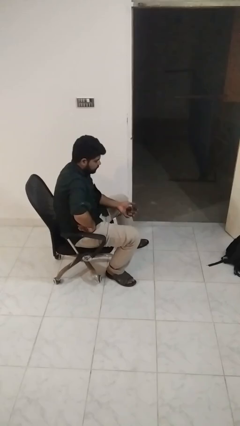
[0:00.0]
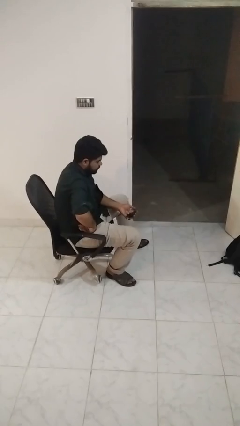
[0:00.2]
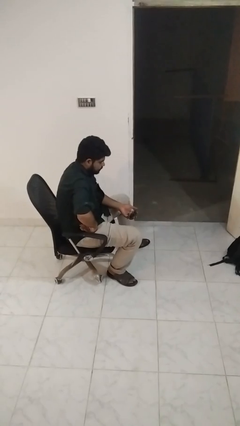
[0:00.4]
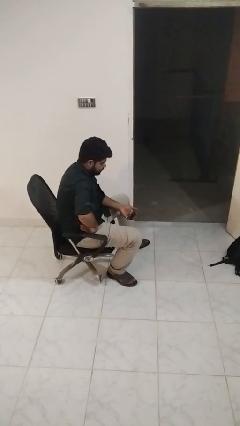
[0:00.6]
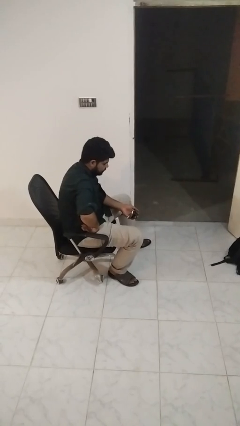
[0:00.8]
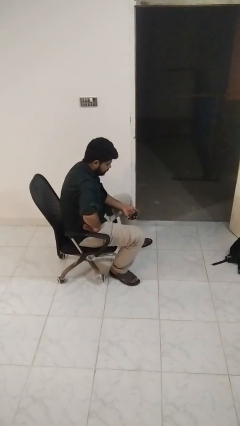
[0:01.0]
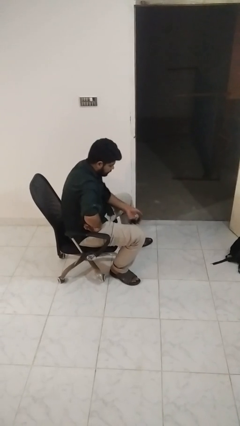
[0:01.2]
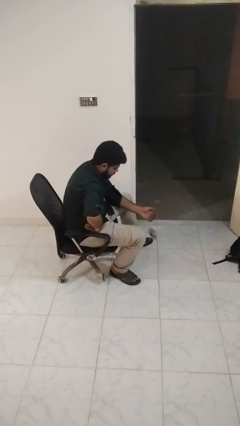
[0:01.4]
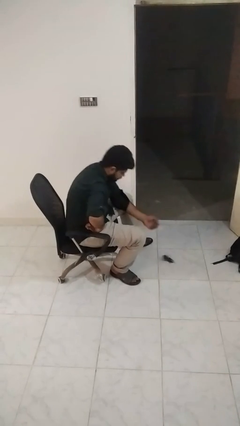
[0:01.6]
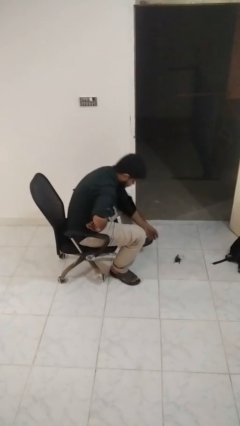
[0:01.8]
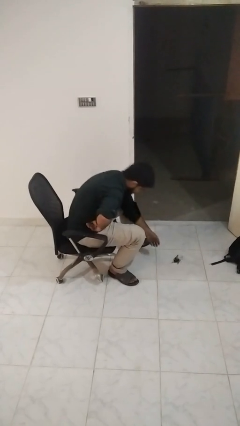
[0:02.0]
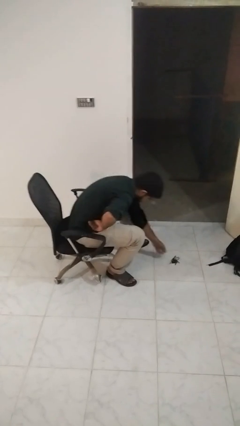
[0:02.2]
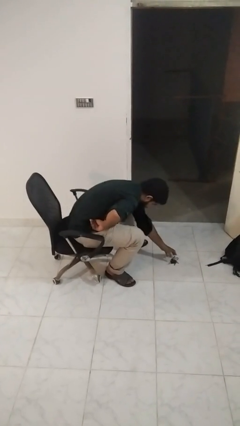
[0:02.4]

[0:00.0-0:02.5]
person drops object

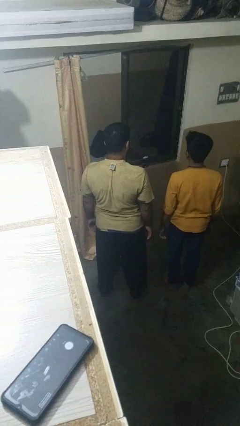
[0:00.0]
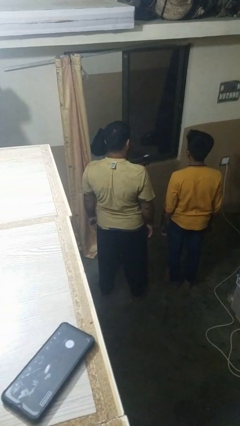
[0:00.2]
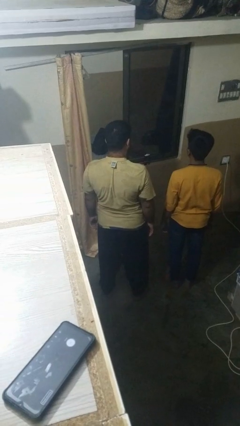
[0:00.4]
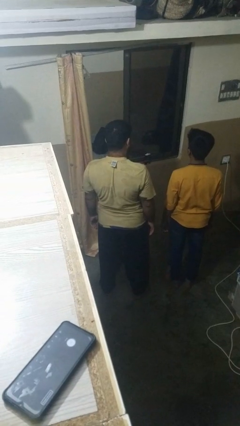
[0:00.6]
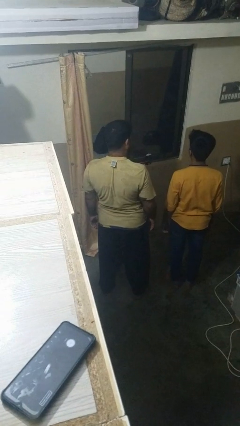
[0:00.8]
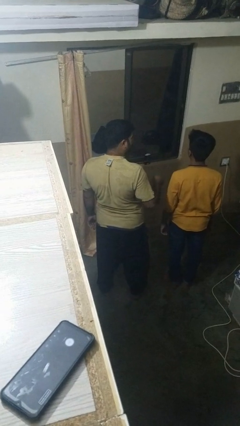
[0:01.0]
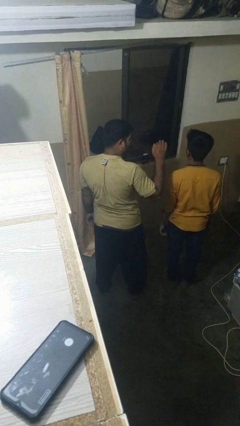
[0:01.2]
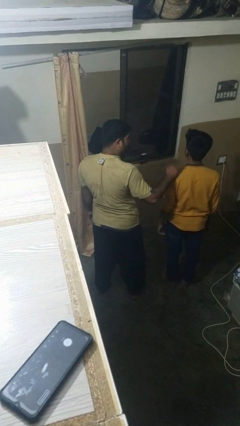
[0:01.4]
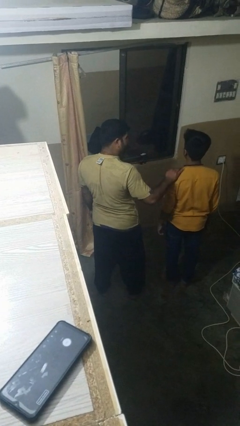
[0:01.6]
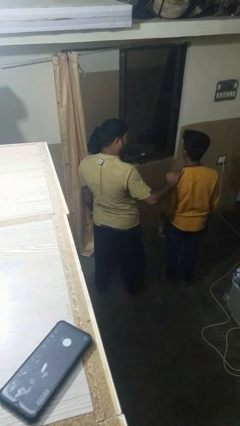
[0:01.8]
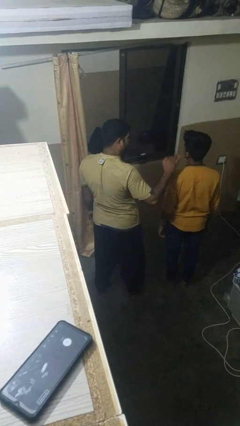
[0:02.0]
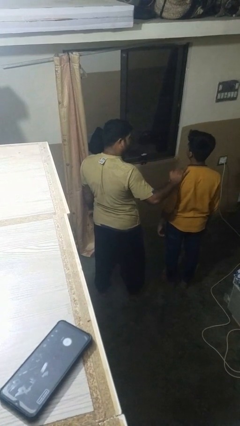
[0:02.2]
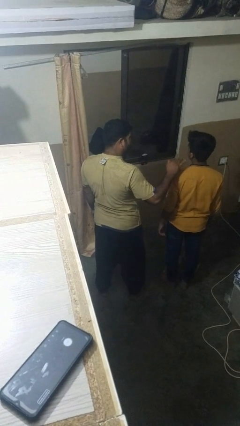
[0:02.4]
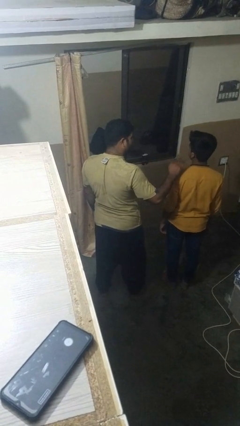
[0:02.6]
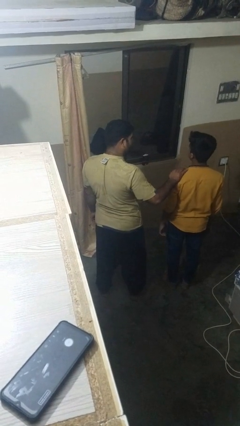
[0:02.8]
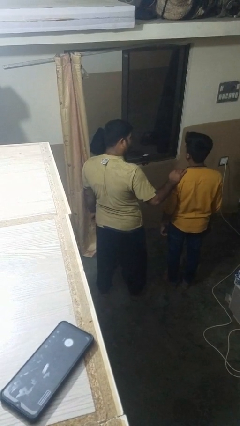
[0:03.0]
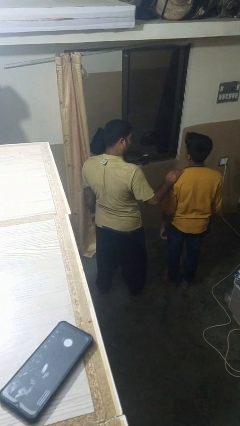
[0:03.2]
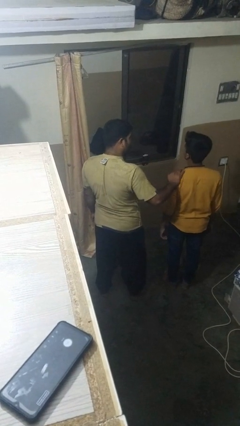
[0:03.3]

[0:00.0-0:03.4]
person pounds shoulders of person

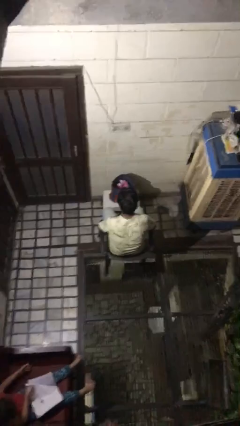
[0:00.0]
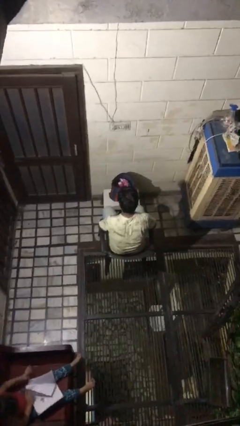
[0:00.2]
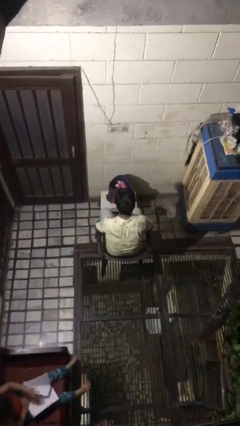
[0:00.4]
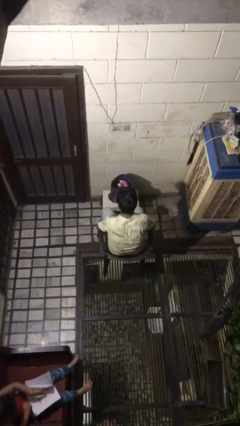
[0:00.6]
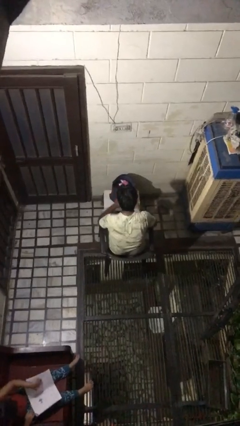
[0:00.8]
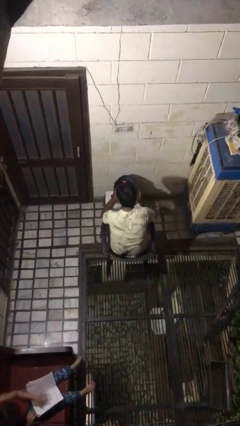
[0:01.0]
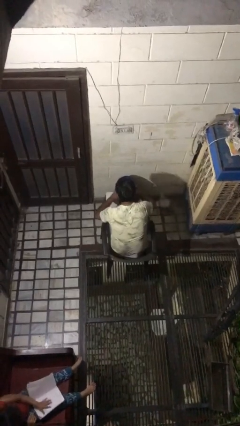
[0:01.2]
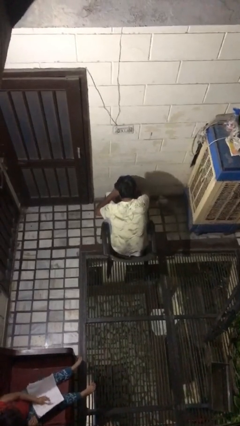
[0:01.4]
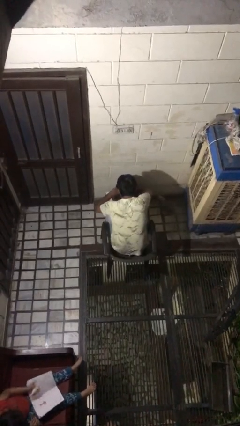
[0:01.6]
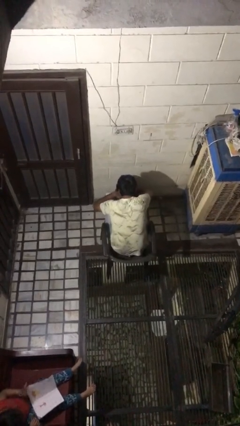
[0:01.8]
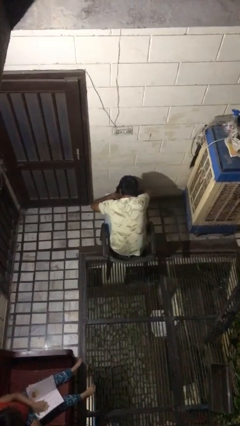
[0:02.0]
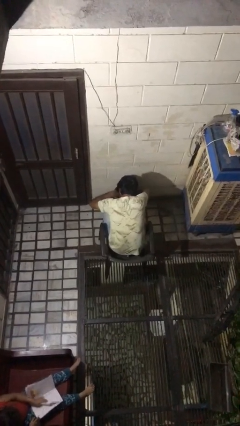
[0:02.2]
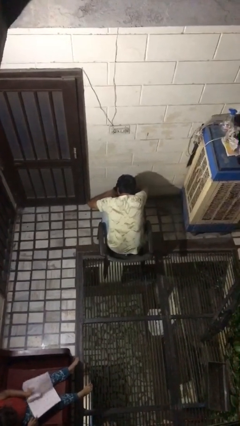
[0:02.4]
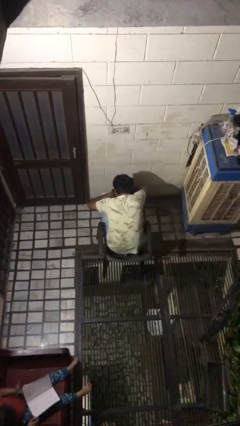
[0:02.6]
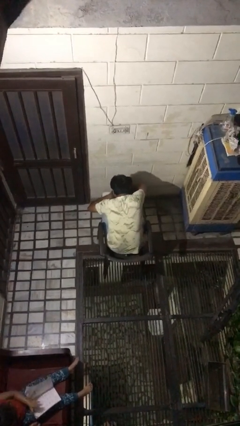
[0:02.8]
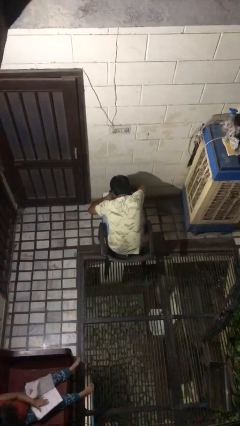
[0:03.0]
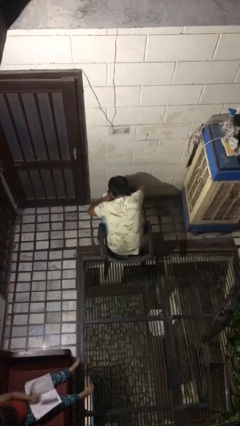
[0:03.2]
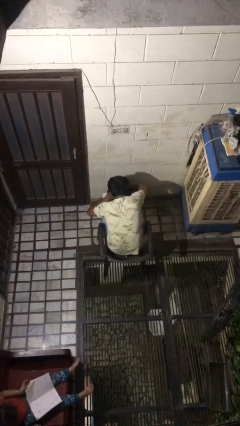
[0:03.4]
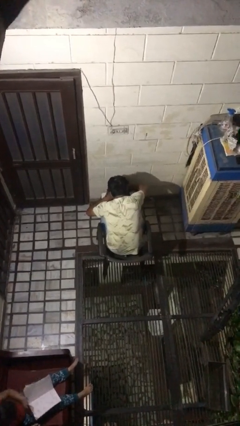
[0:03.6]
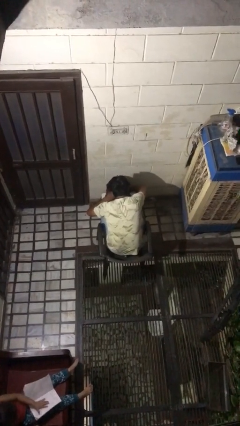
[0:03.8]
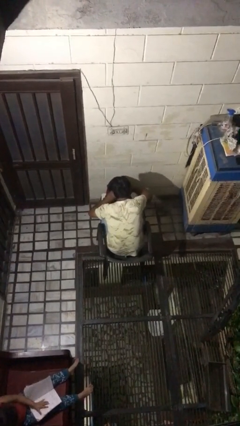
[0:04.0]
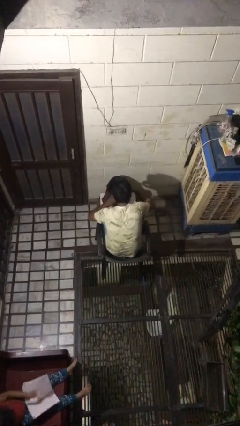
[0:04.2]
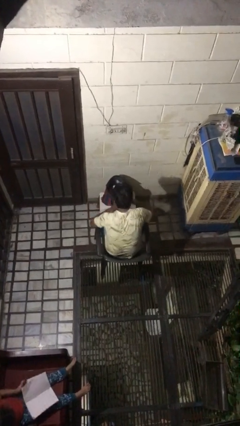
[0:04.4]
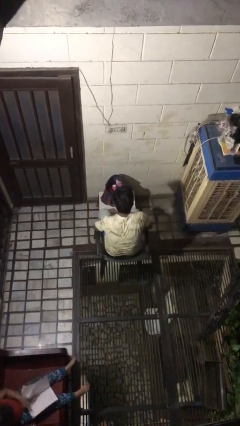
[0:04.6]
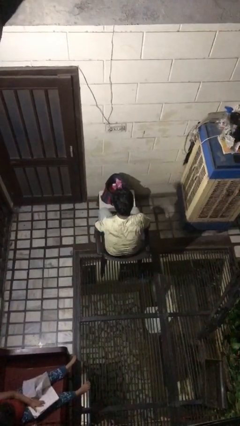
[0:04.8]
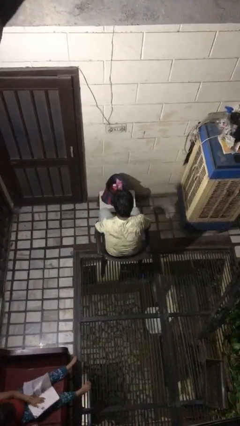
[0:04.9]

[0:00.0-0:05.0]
person searches in bag

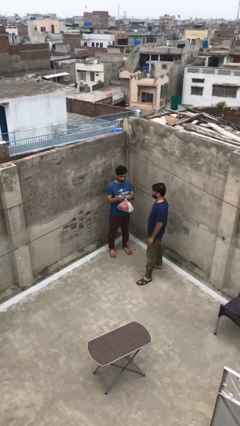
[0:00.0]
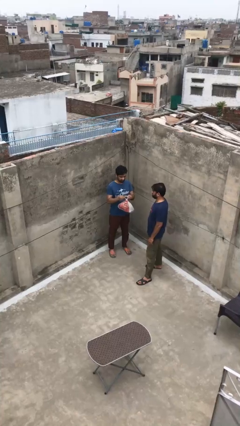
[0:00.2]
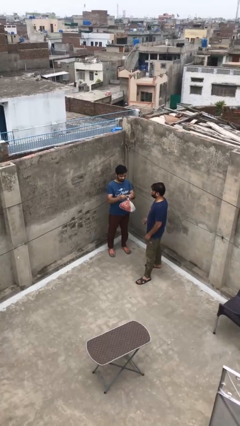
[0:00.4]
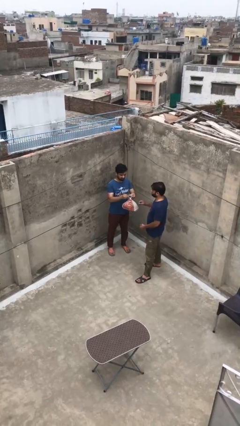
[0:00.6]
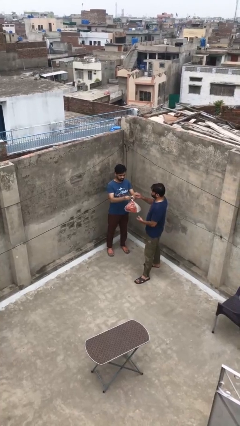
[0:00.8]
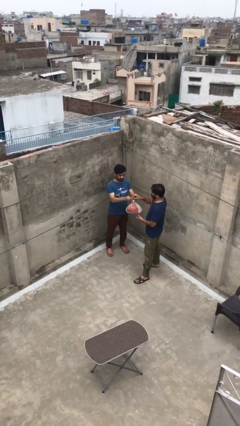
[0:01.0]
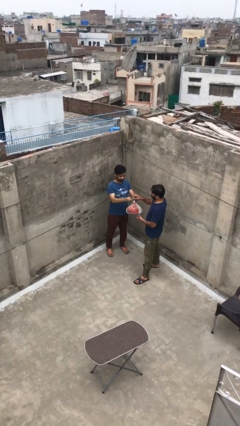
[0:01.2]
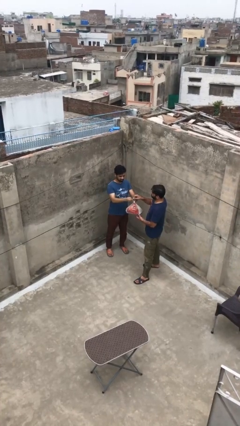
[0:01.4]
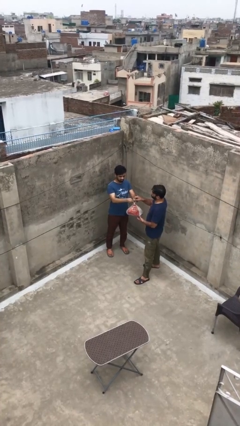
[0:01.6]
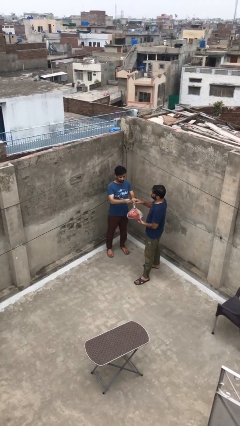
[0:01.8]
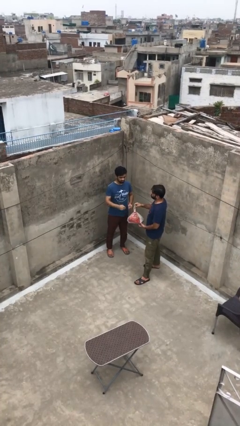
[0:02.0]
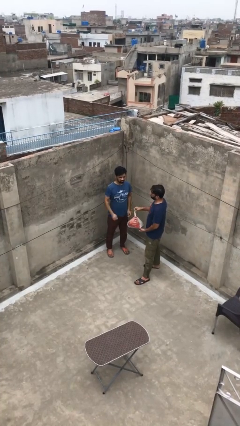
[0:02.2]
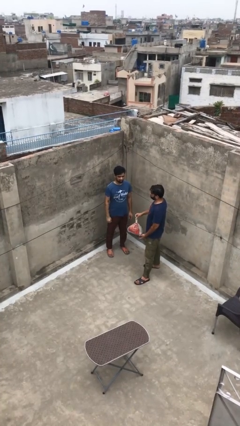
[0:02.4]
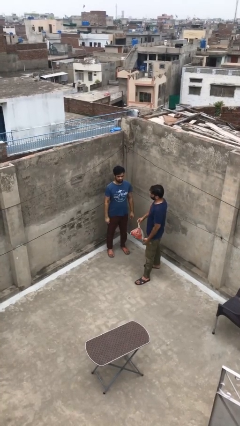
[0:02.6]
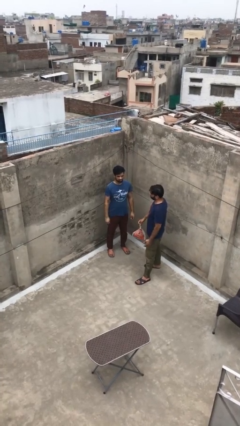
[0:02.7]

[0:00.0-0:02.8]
person transfers object to person

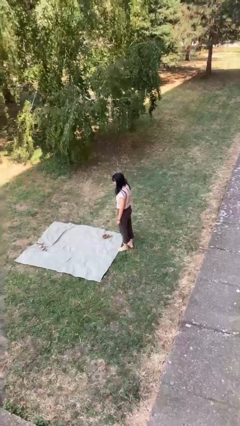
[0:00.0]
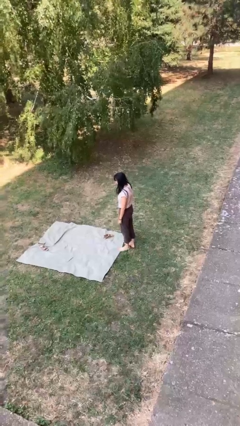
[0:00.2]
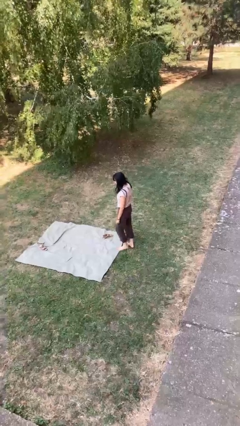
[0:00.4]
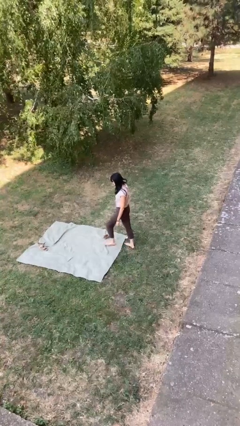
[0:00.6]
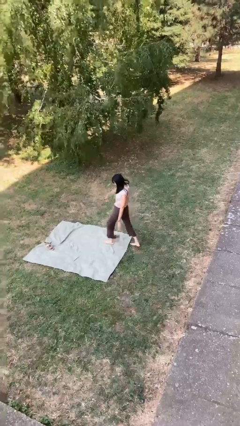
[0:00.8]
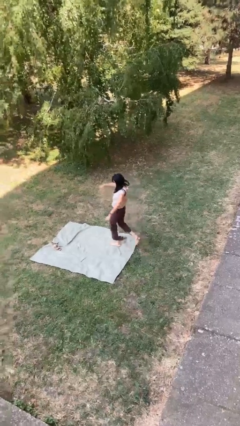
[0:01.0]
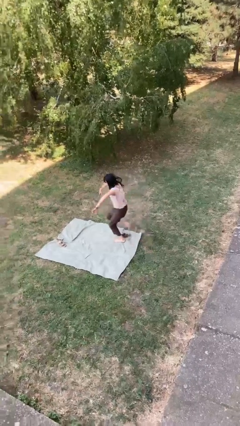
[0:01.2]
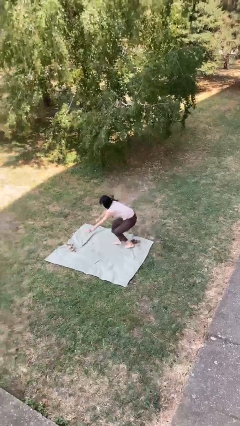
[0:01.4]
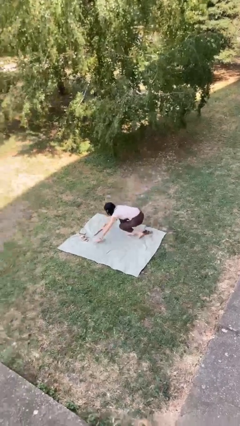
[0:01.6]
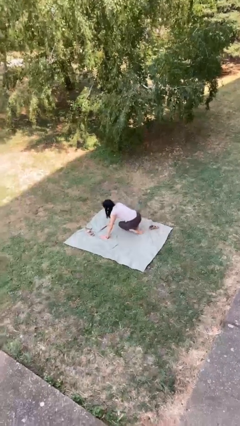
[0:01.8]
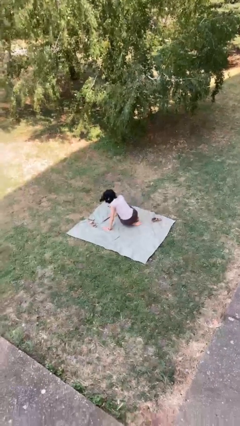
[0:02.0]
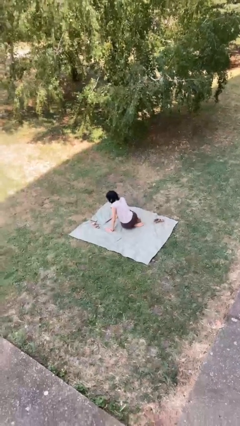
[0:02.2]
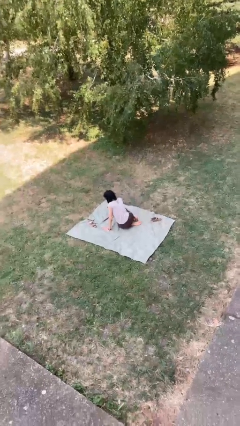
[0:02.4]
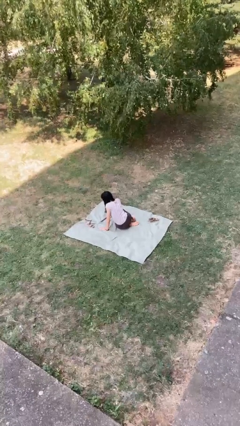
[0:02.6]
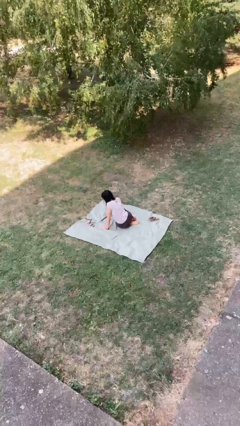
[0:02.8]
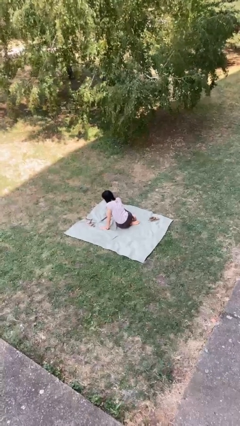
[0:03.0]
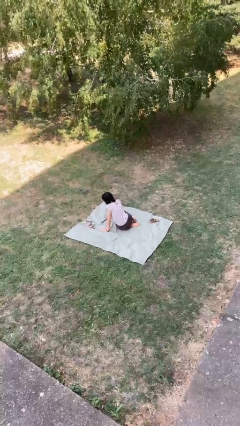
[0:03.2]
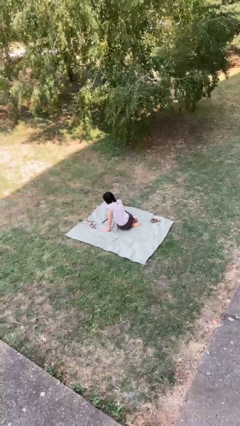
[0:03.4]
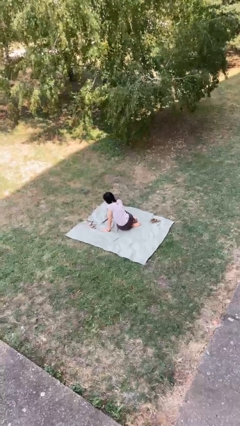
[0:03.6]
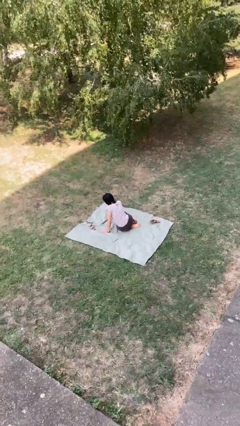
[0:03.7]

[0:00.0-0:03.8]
person trips on object on floor
